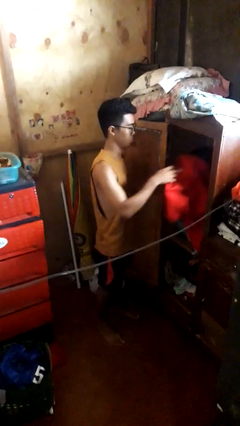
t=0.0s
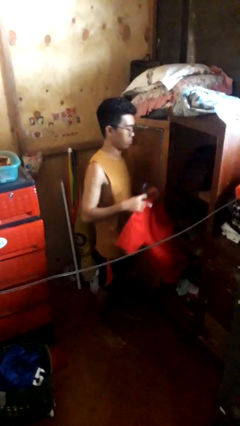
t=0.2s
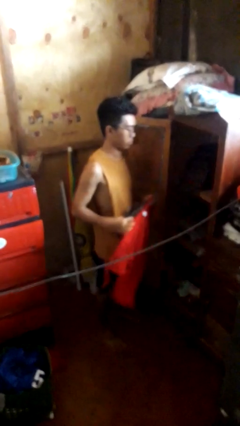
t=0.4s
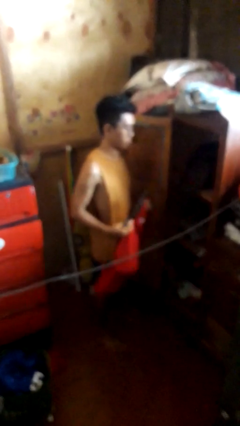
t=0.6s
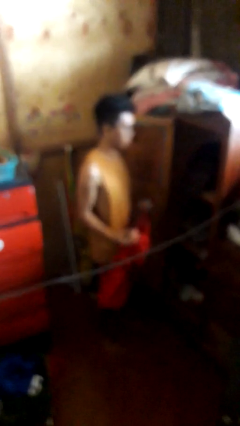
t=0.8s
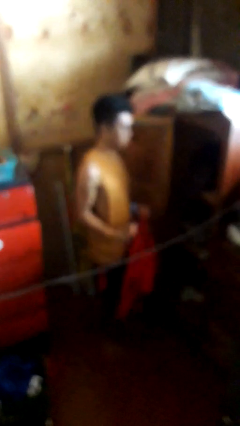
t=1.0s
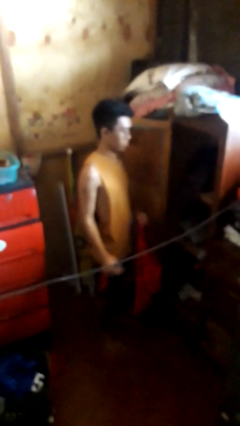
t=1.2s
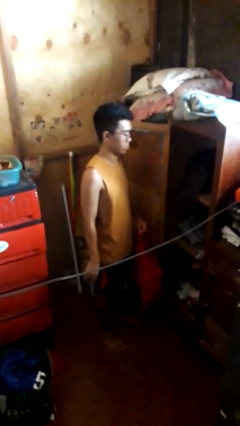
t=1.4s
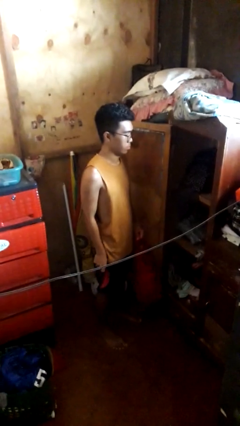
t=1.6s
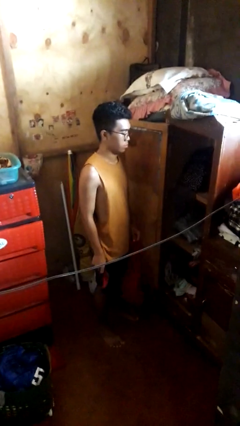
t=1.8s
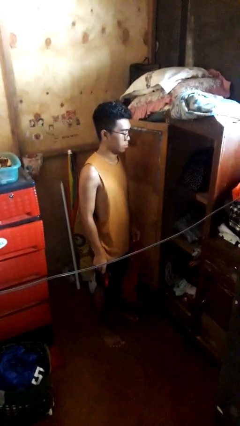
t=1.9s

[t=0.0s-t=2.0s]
person takes clothes from closet

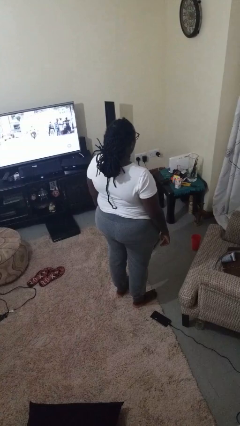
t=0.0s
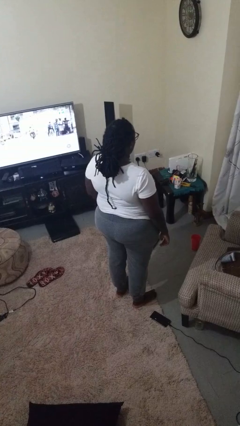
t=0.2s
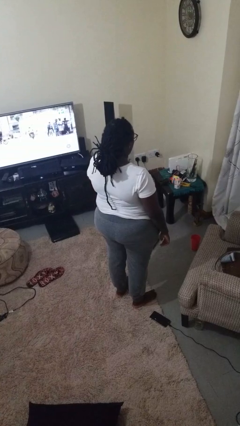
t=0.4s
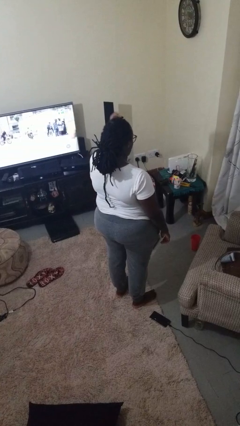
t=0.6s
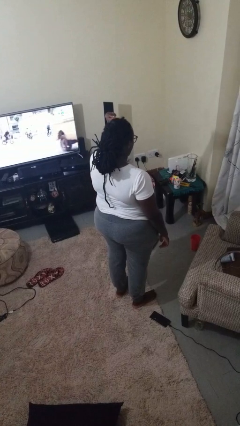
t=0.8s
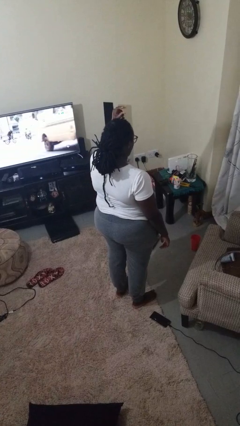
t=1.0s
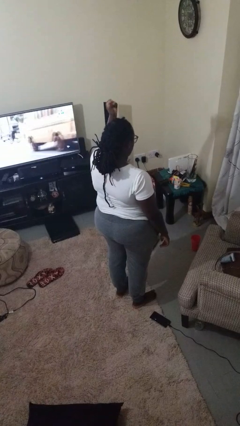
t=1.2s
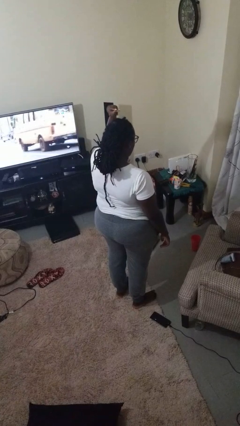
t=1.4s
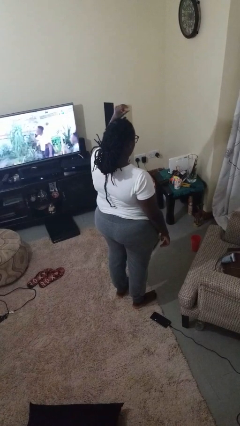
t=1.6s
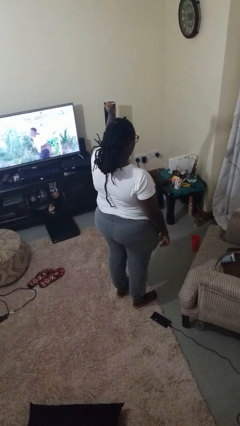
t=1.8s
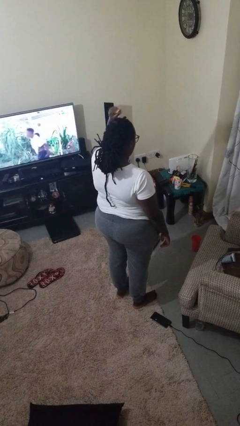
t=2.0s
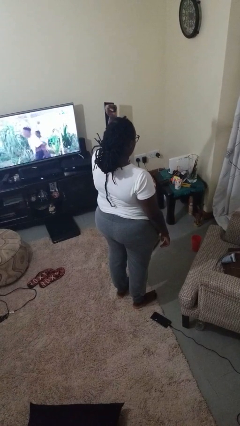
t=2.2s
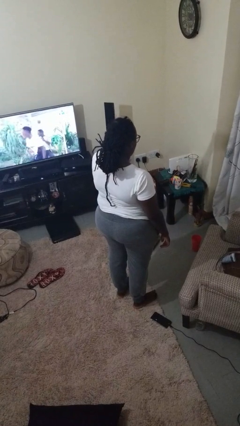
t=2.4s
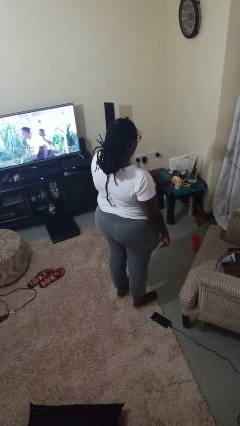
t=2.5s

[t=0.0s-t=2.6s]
person snaps fingers

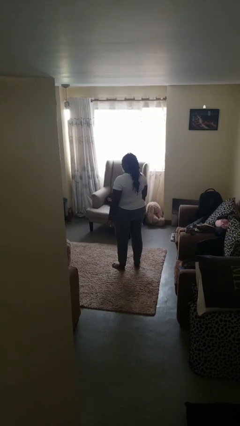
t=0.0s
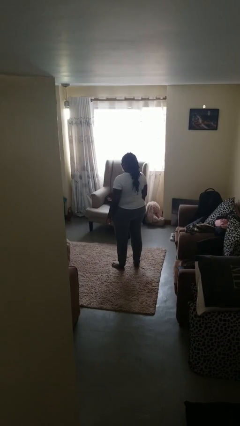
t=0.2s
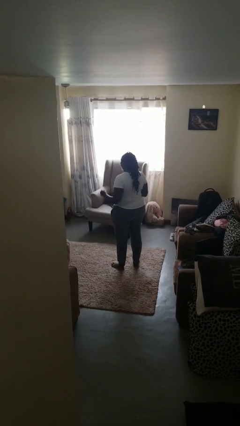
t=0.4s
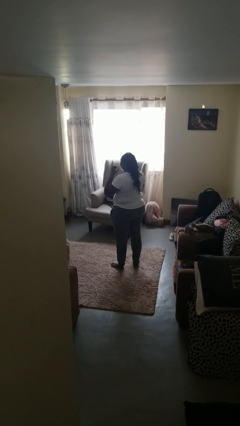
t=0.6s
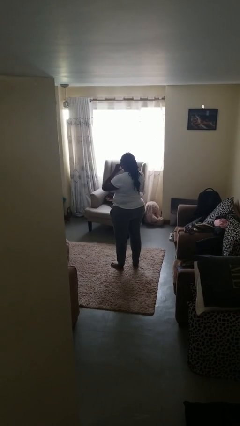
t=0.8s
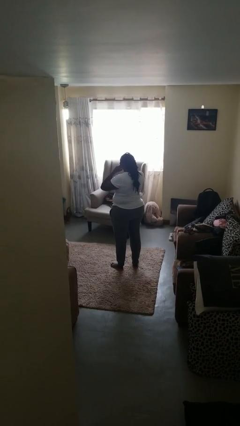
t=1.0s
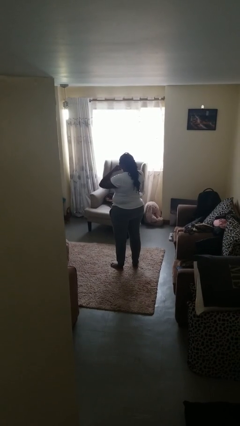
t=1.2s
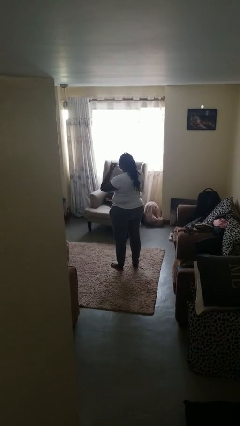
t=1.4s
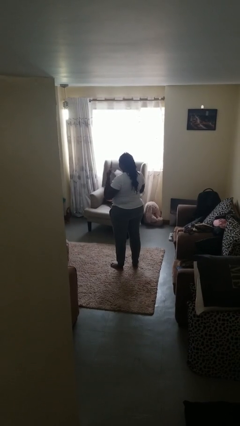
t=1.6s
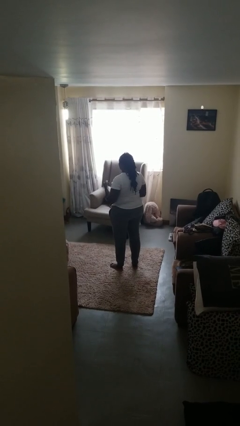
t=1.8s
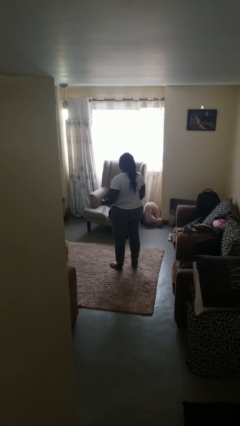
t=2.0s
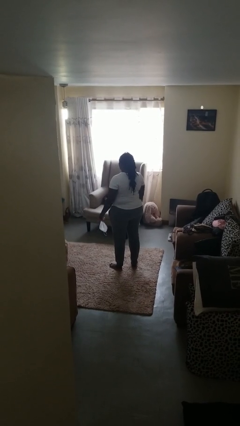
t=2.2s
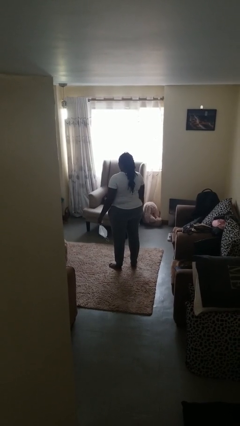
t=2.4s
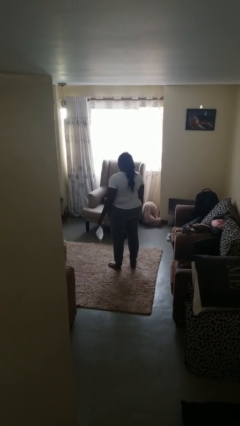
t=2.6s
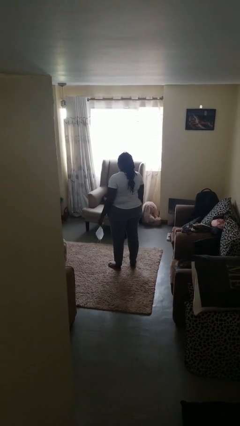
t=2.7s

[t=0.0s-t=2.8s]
person takes off facemask

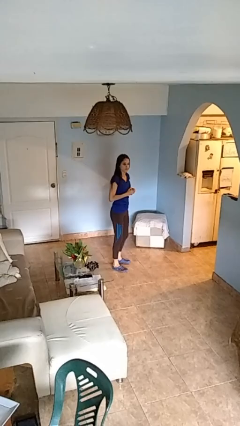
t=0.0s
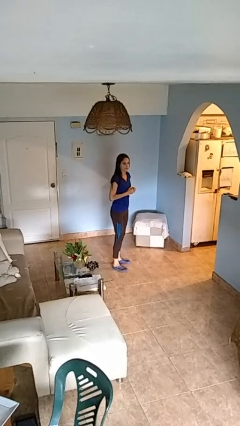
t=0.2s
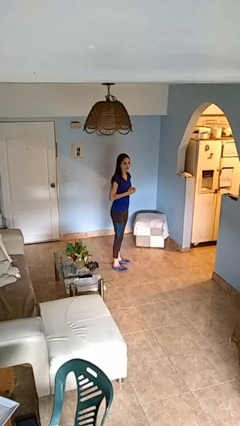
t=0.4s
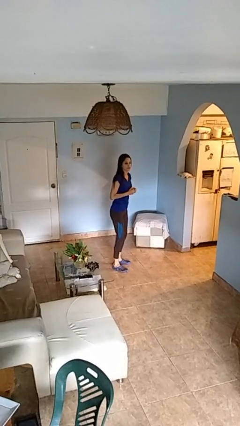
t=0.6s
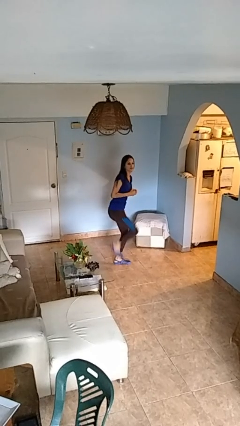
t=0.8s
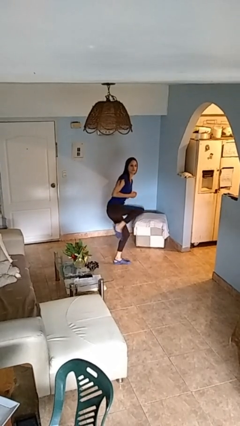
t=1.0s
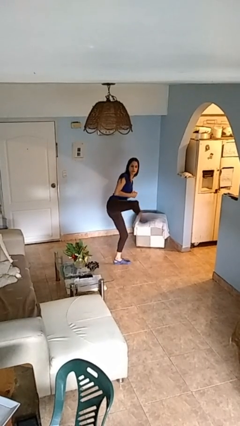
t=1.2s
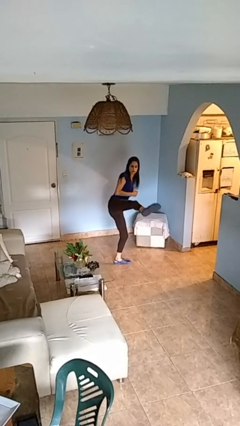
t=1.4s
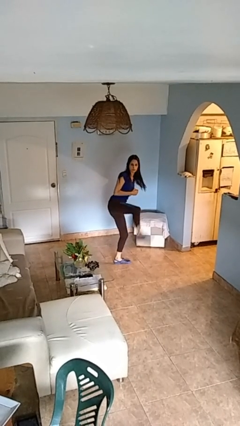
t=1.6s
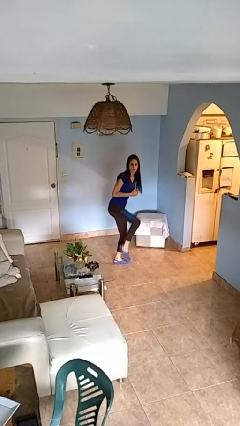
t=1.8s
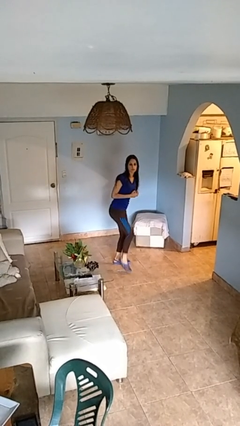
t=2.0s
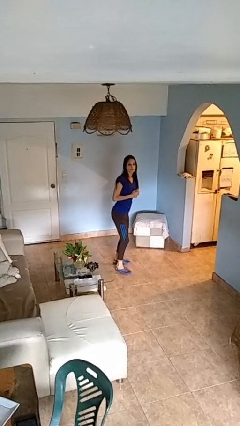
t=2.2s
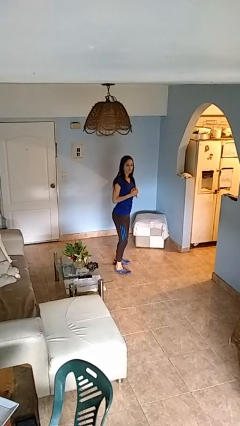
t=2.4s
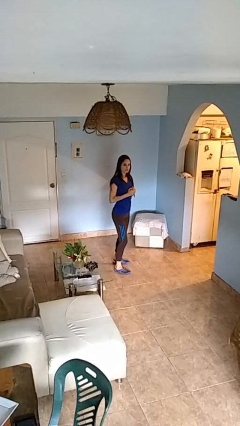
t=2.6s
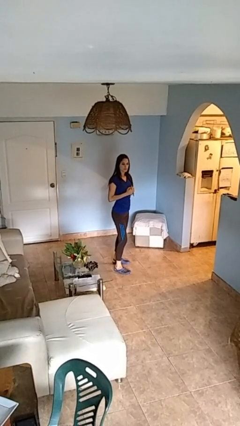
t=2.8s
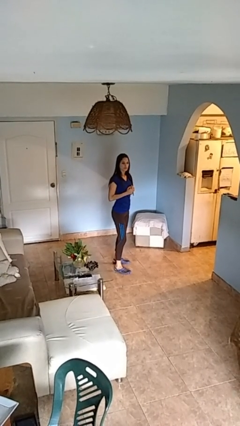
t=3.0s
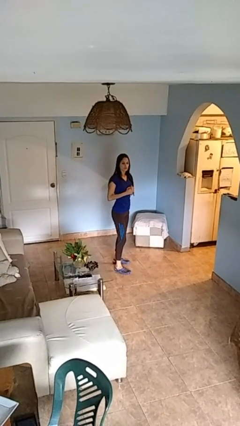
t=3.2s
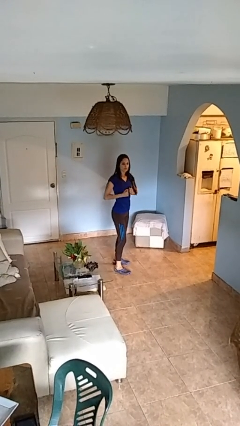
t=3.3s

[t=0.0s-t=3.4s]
person karate kicks

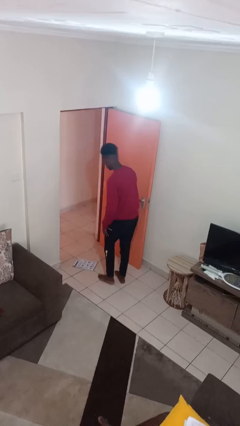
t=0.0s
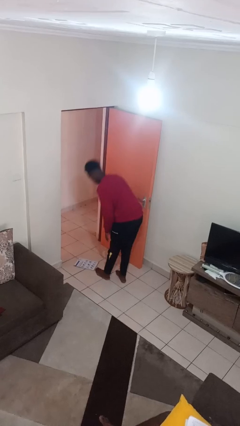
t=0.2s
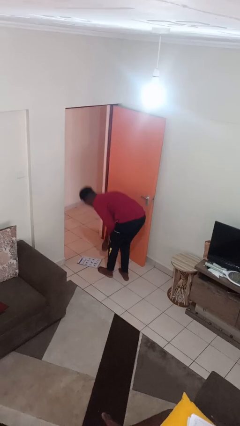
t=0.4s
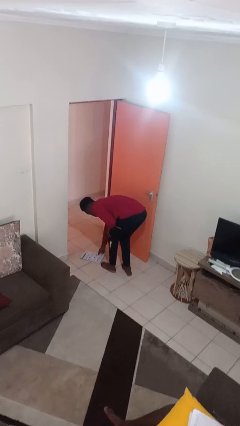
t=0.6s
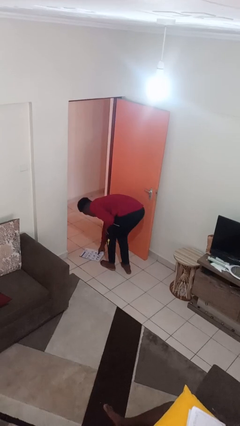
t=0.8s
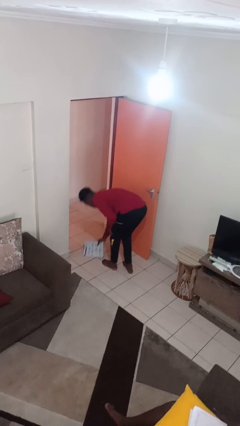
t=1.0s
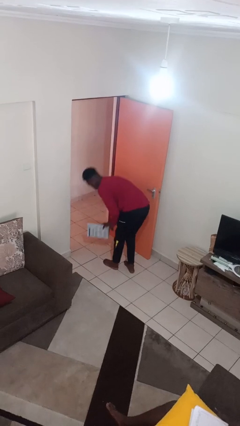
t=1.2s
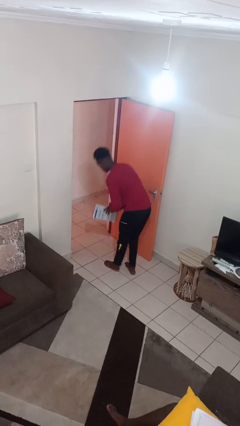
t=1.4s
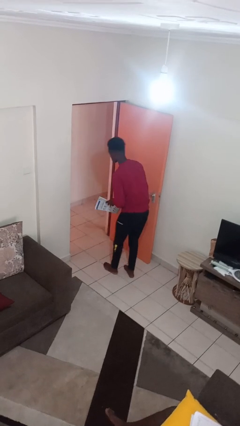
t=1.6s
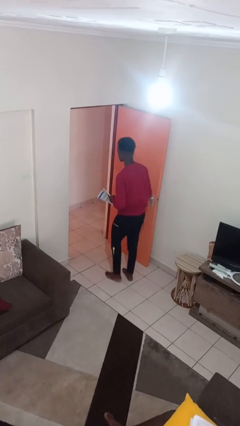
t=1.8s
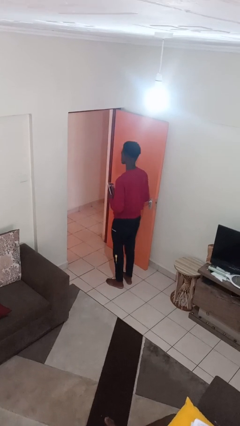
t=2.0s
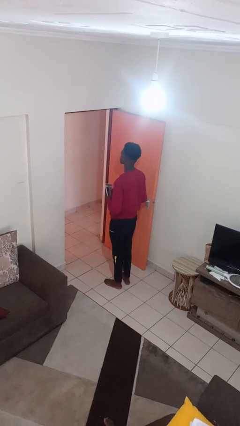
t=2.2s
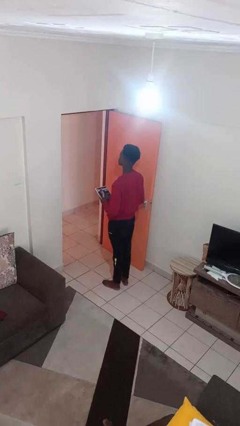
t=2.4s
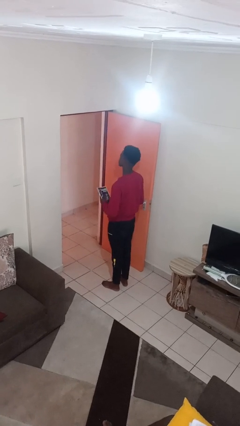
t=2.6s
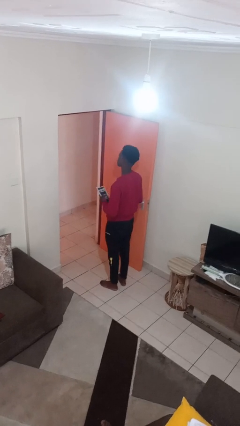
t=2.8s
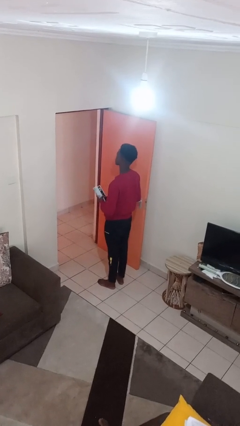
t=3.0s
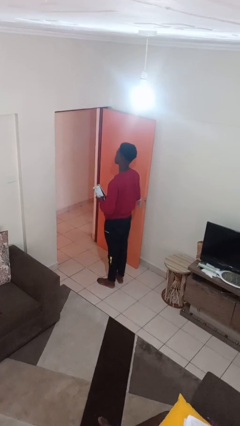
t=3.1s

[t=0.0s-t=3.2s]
person picks up object from floor

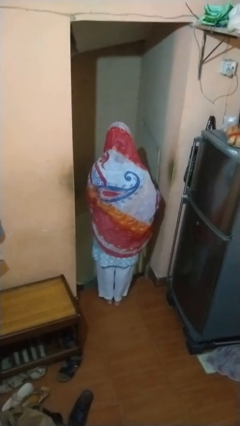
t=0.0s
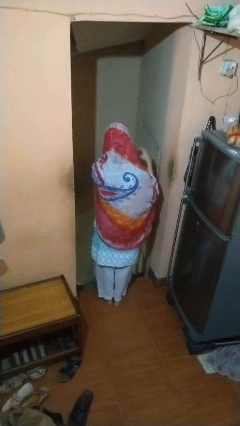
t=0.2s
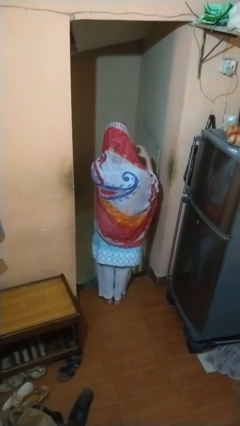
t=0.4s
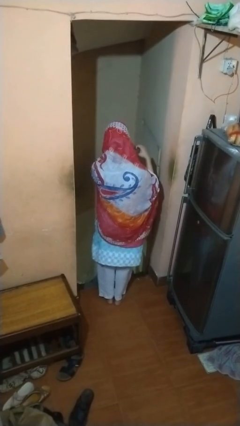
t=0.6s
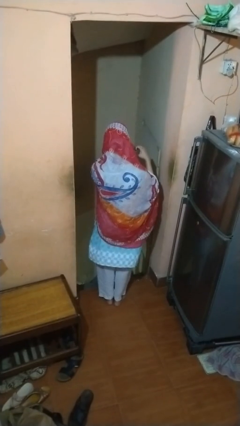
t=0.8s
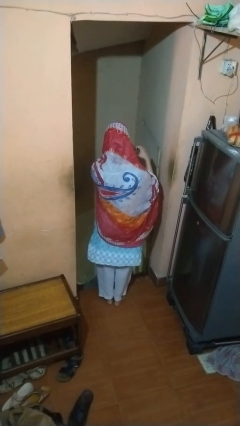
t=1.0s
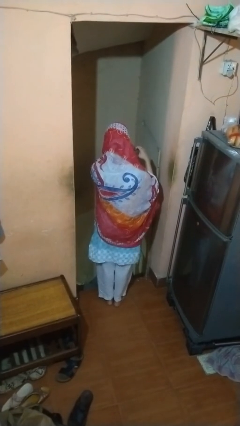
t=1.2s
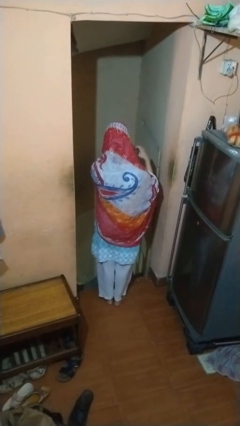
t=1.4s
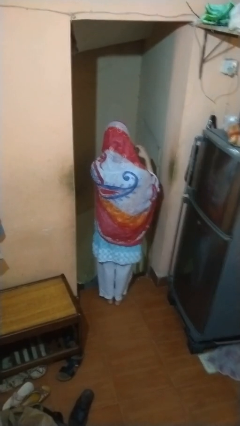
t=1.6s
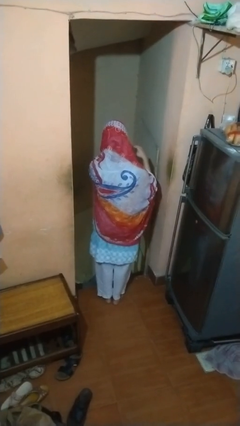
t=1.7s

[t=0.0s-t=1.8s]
person gestures heart

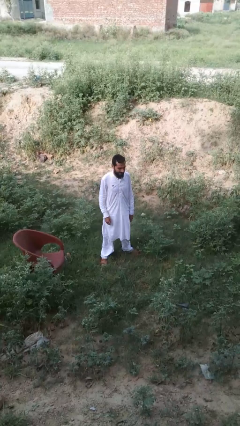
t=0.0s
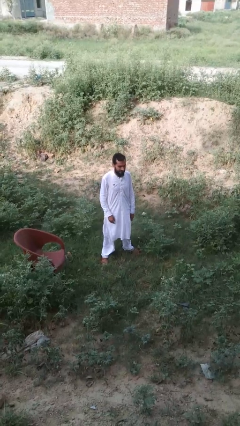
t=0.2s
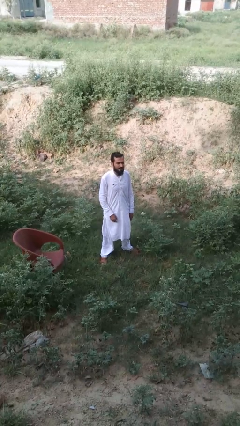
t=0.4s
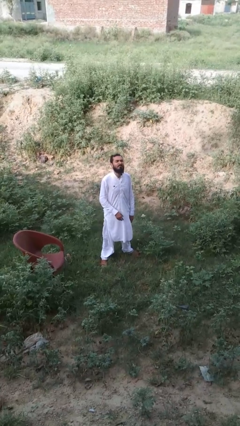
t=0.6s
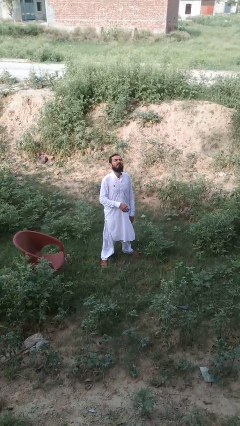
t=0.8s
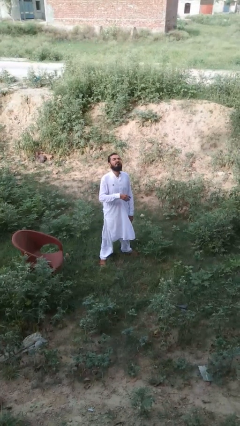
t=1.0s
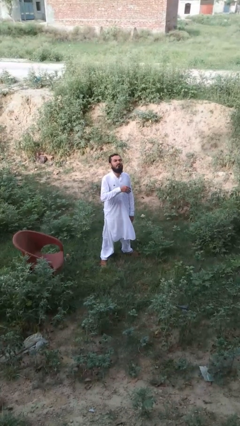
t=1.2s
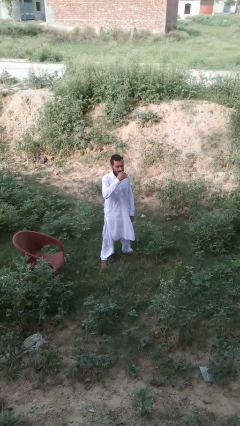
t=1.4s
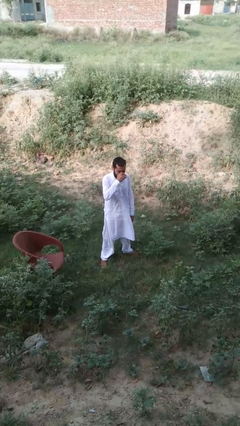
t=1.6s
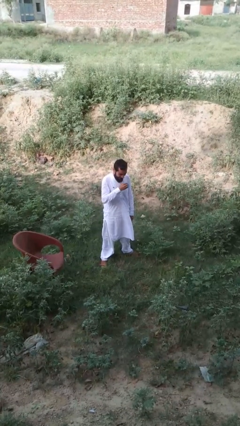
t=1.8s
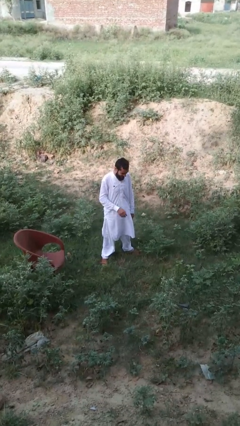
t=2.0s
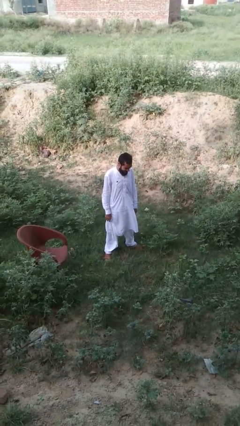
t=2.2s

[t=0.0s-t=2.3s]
person sneezes into hand
